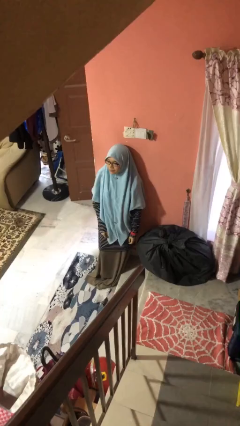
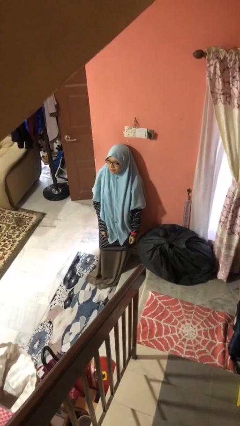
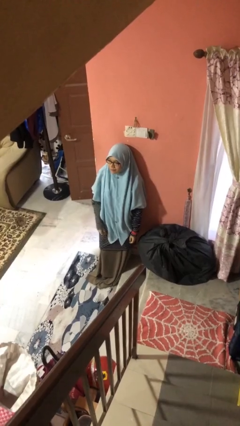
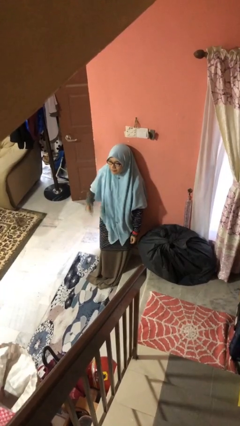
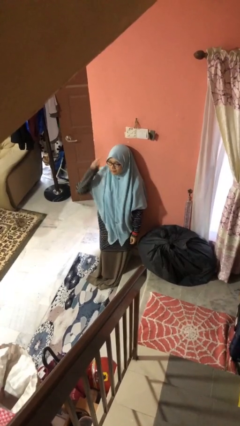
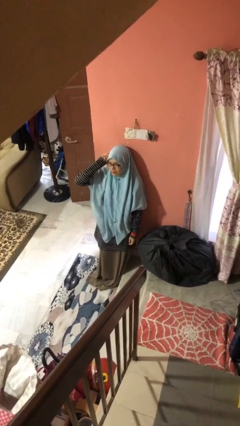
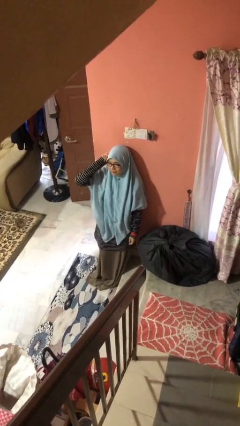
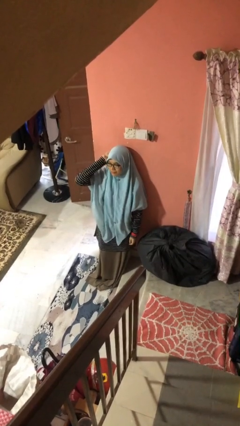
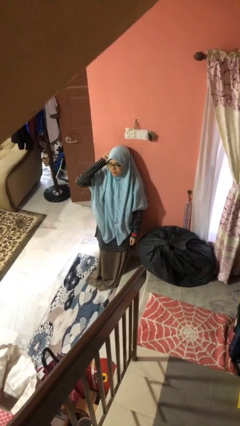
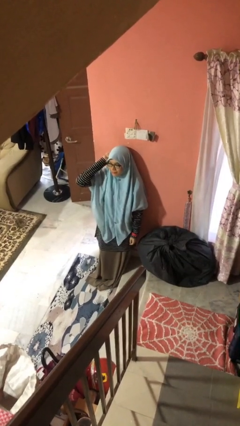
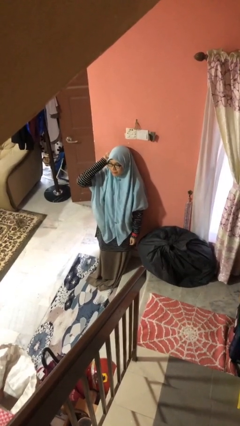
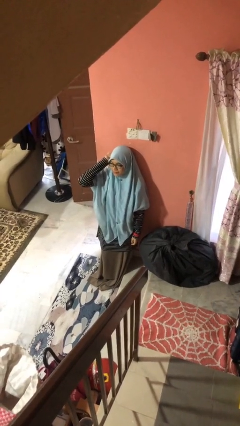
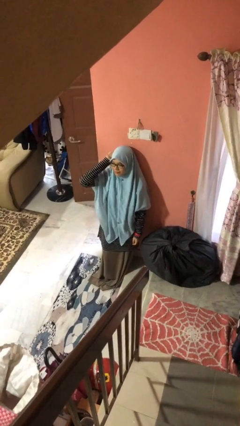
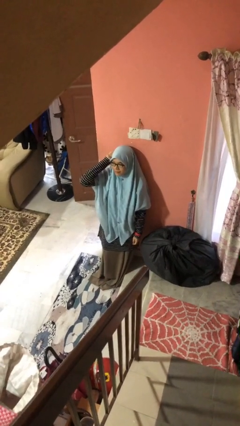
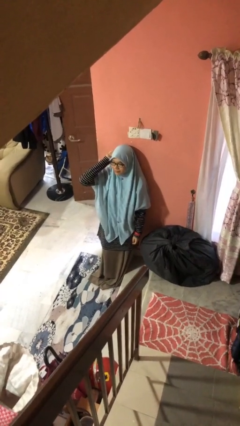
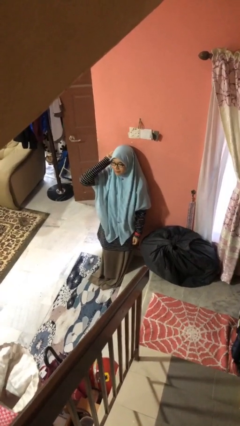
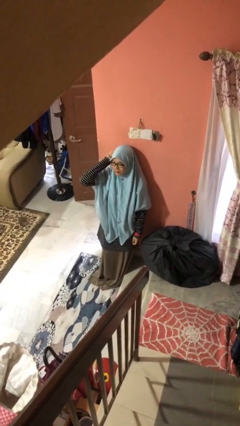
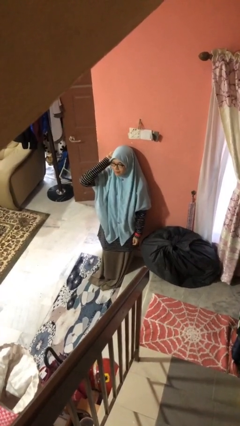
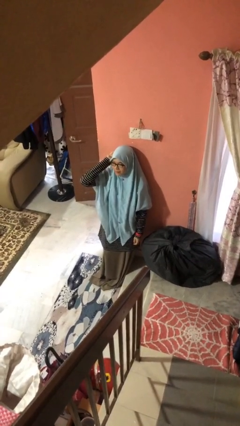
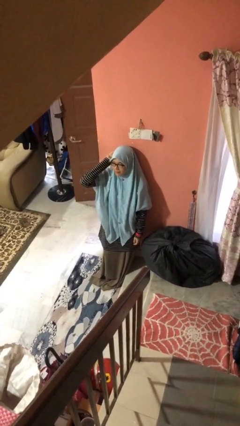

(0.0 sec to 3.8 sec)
person scratches face

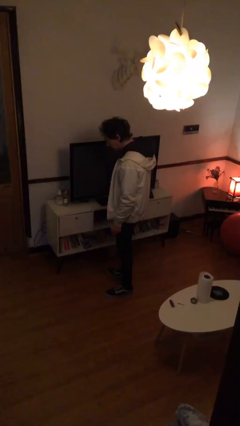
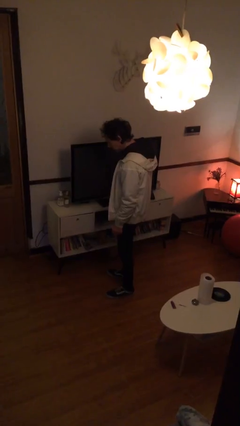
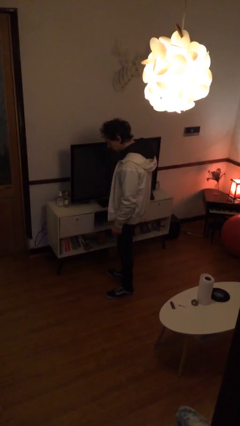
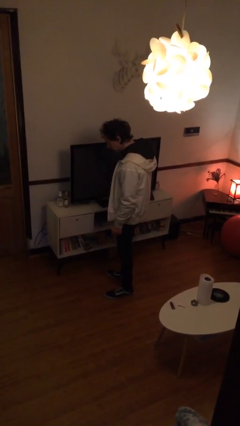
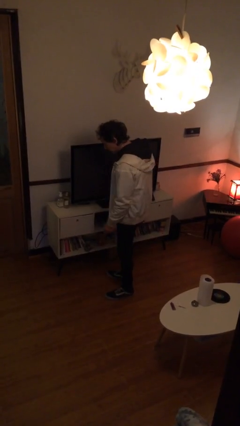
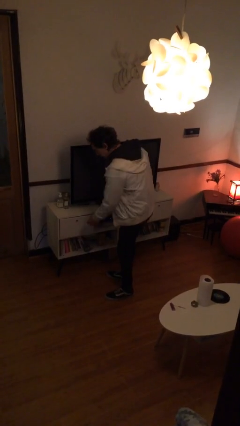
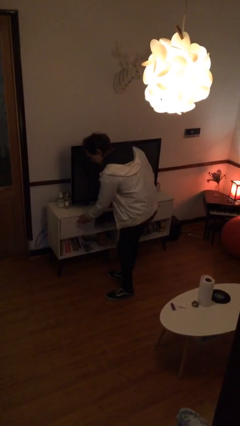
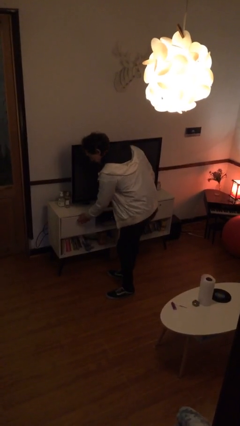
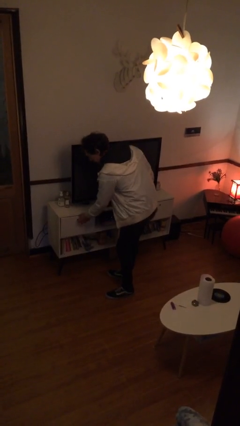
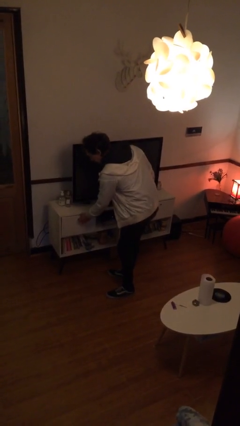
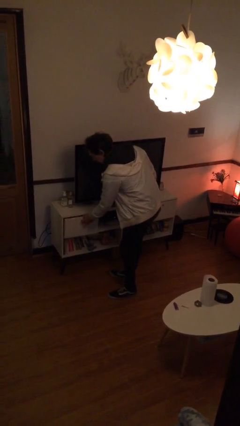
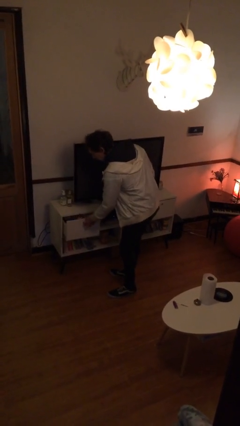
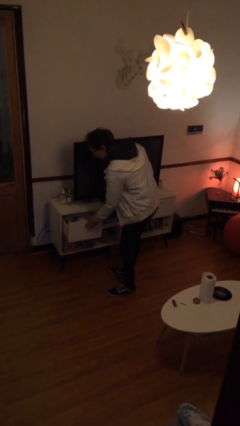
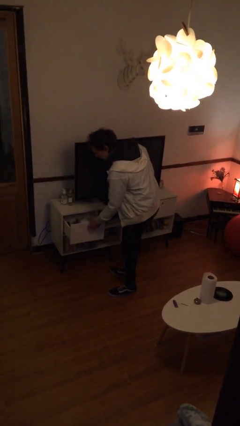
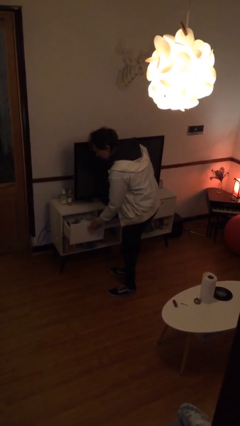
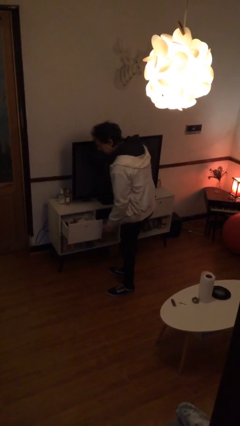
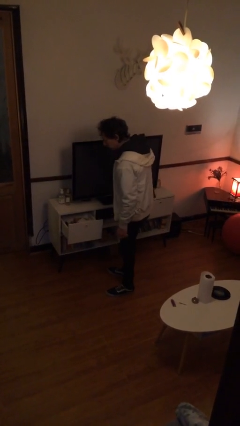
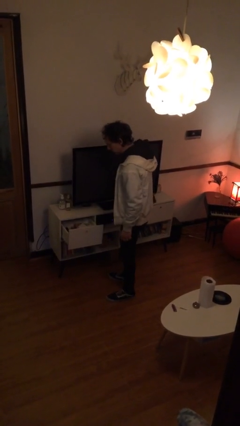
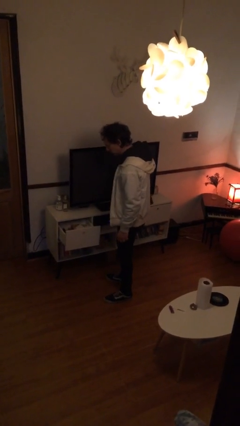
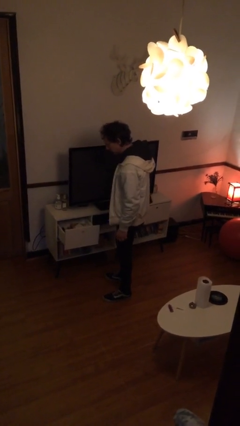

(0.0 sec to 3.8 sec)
person opens dresser drawer

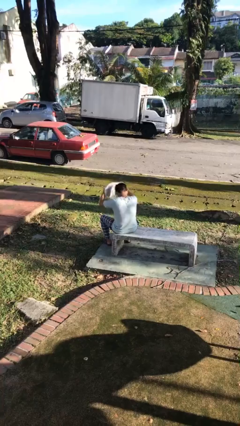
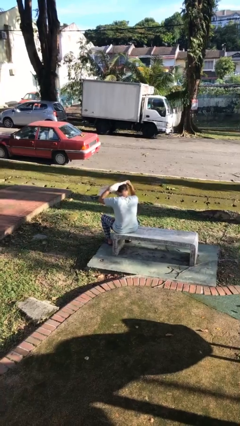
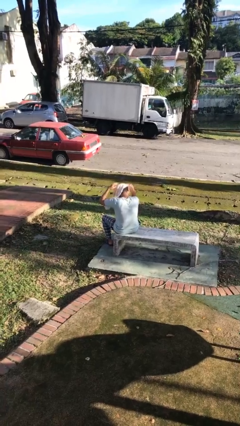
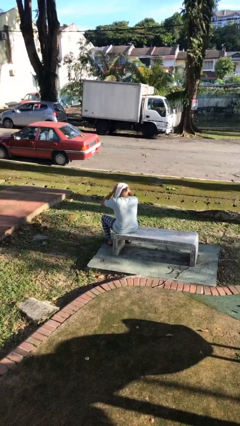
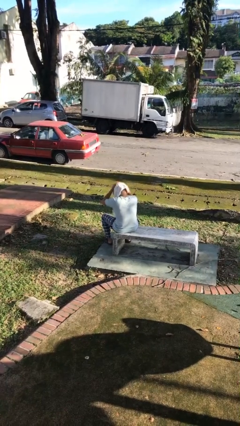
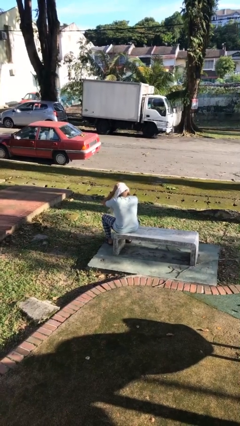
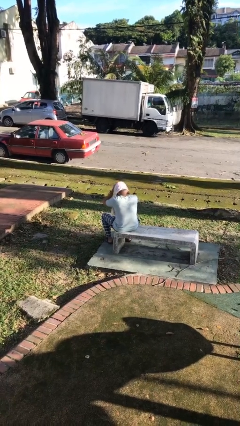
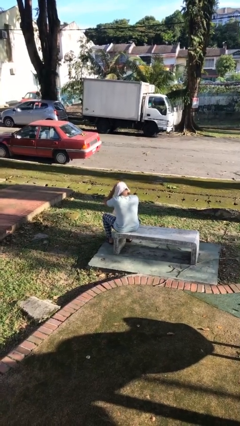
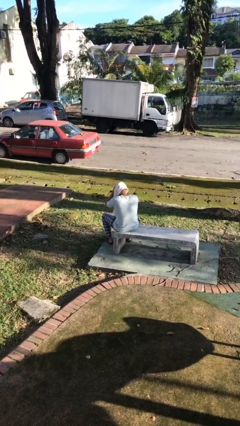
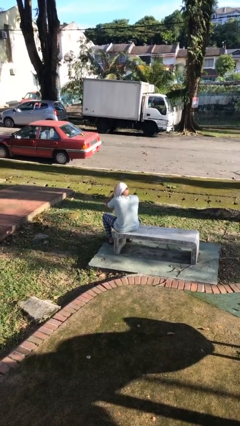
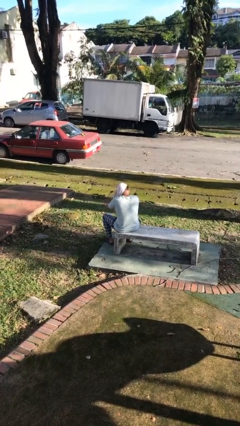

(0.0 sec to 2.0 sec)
person dries hair with towel

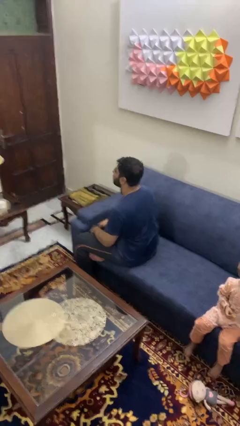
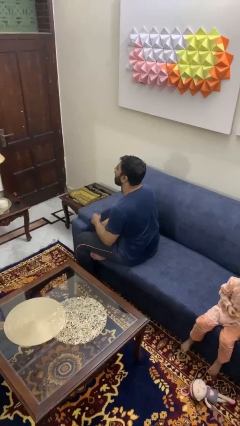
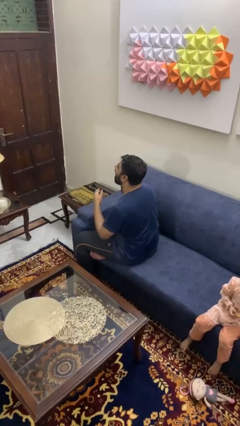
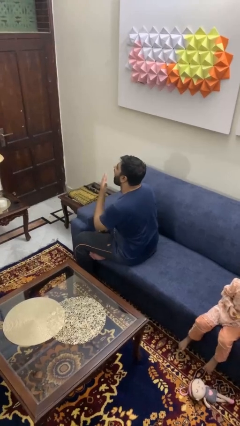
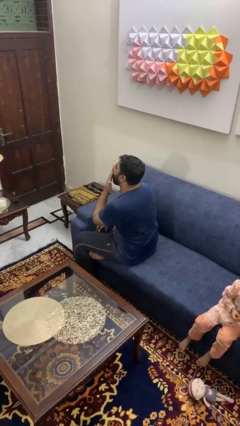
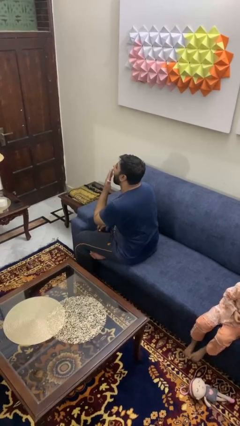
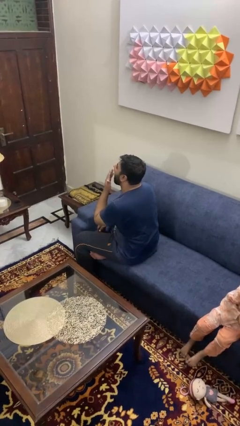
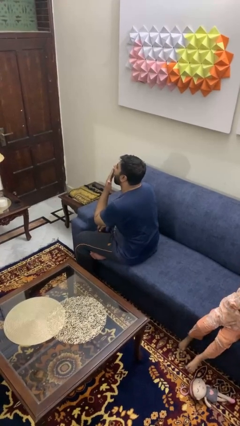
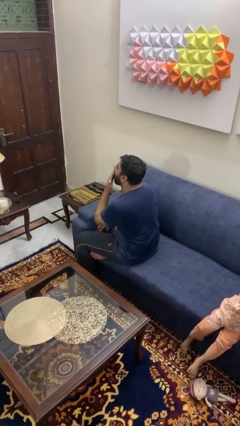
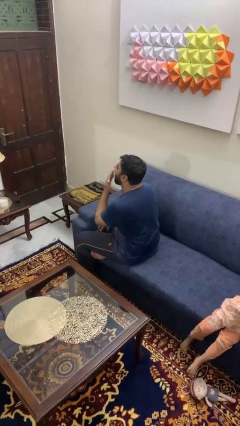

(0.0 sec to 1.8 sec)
person yawns

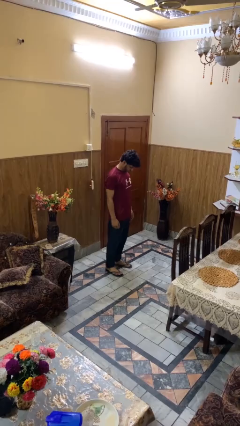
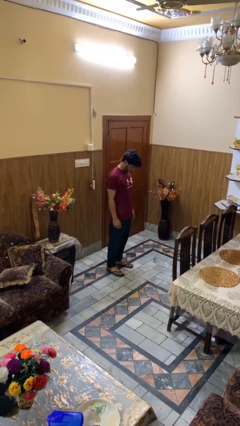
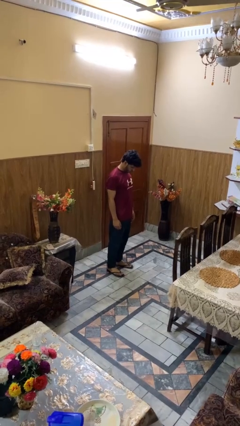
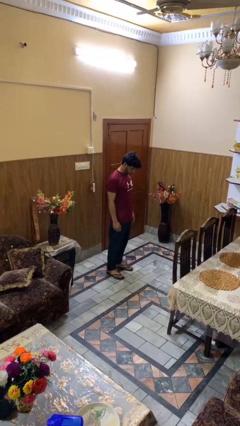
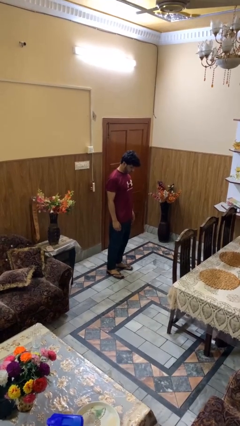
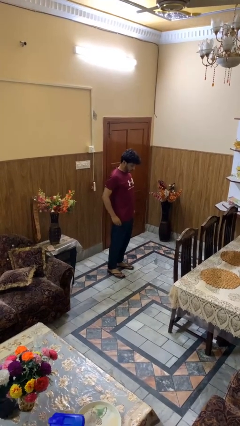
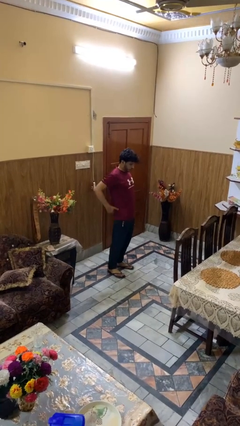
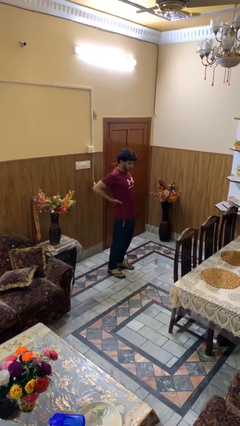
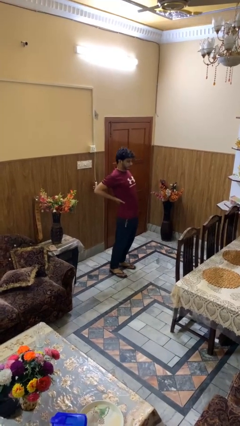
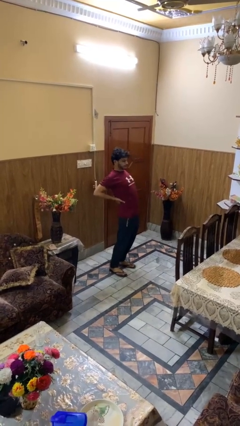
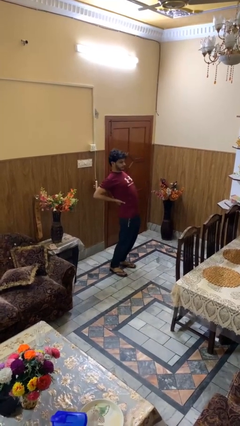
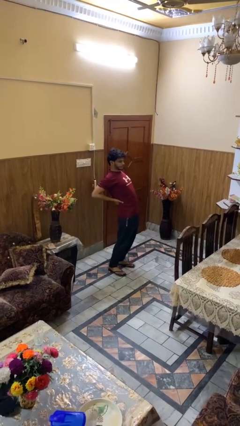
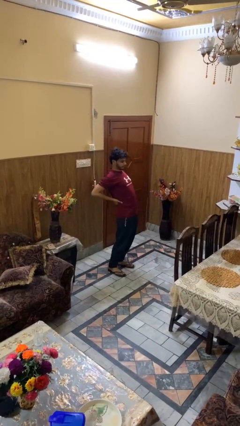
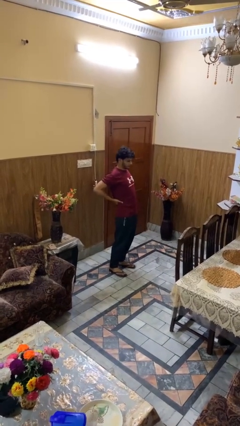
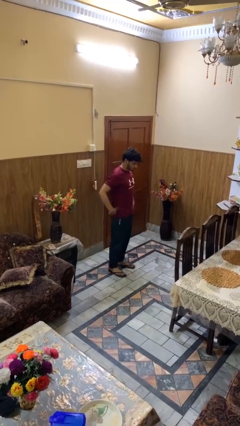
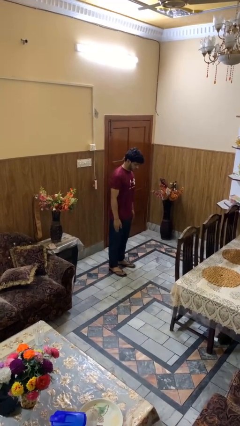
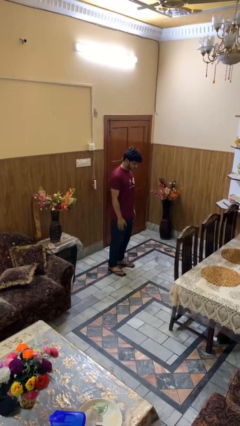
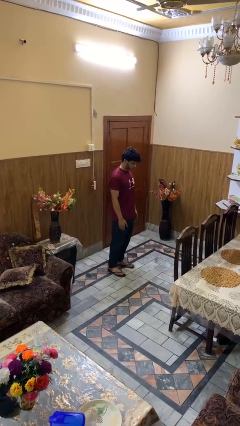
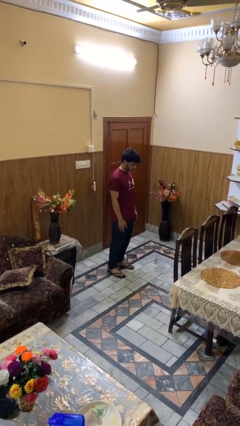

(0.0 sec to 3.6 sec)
person stretches back

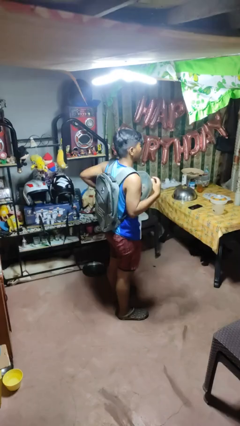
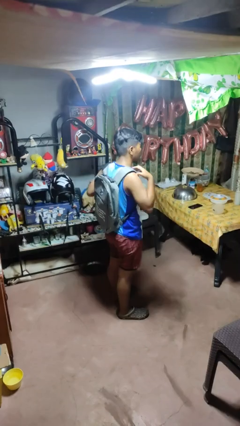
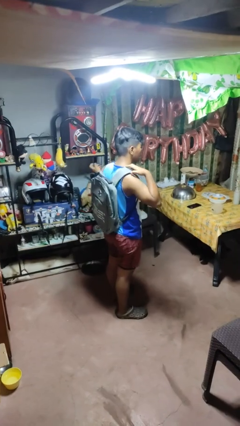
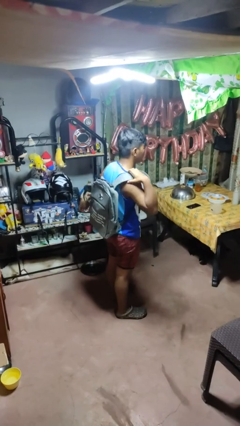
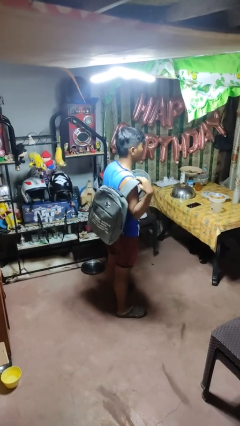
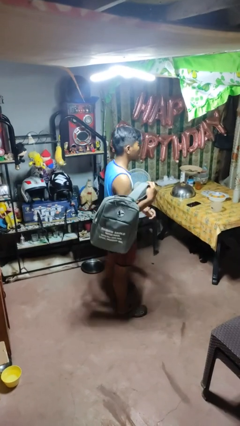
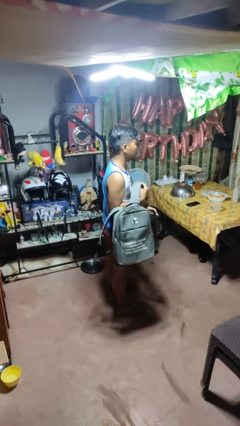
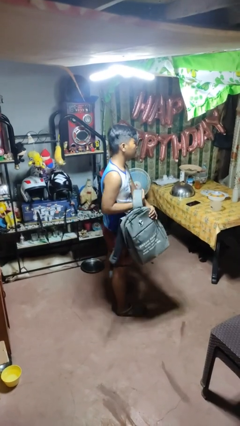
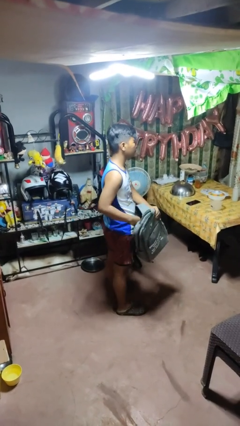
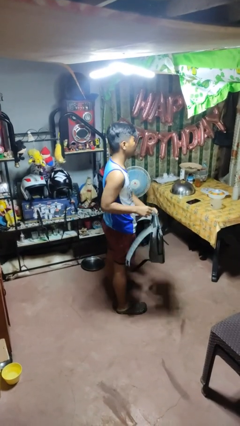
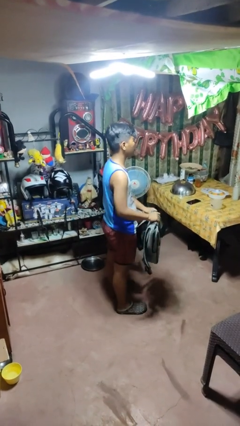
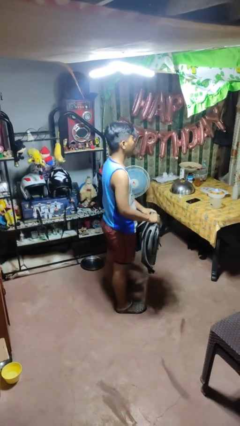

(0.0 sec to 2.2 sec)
person takes off backpack
